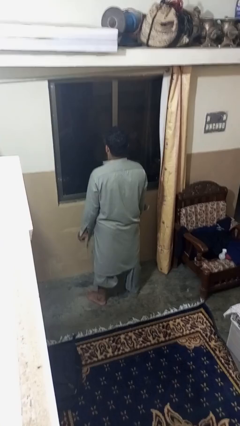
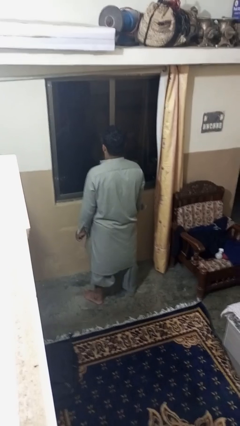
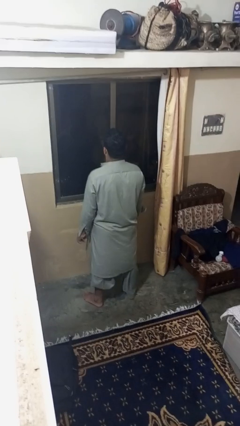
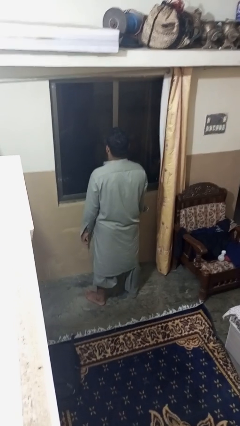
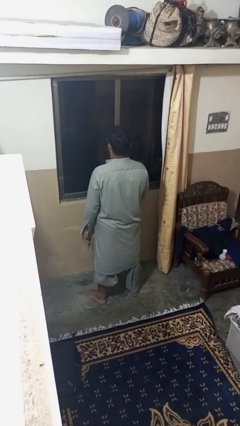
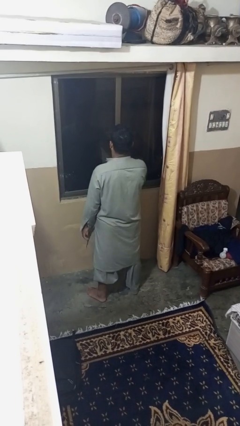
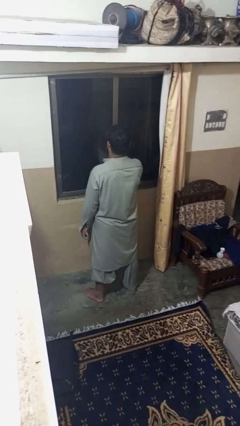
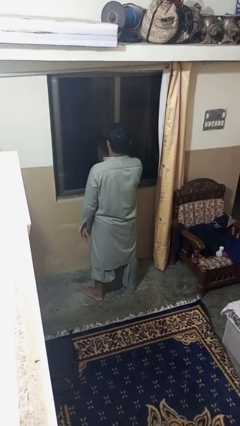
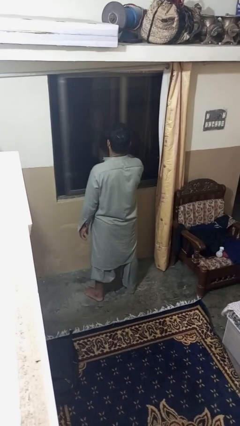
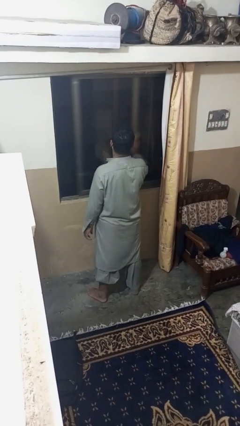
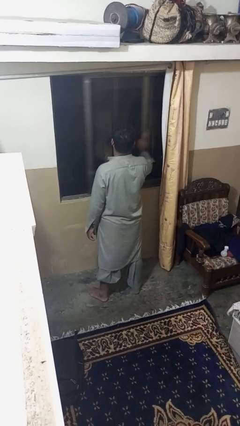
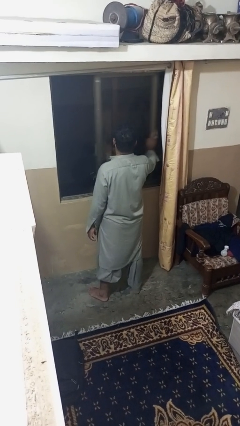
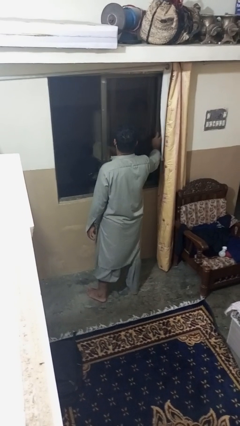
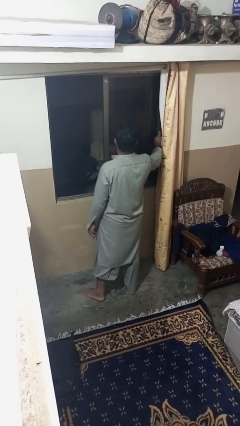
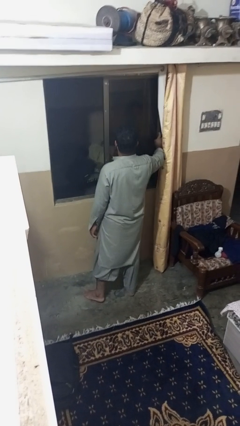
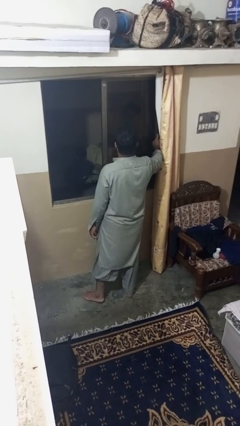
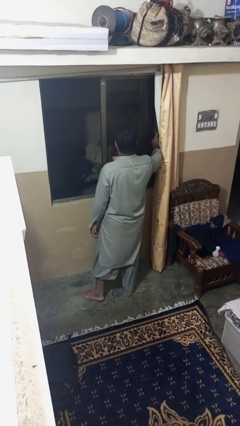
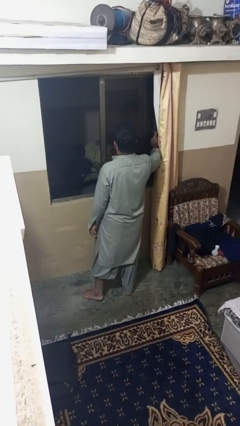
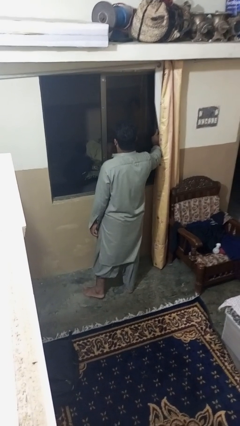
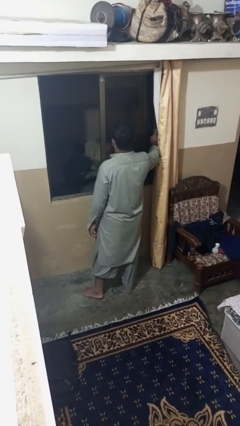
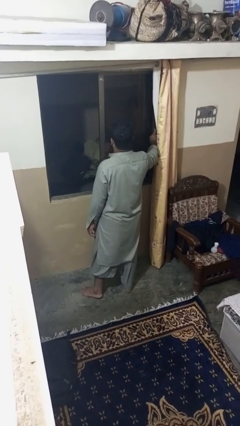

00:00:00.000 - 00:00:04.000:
person opens home window

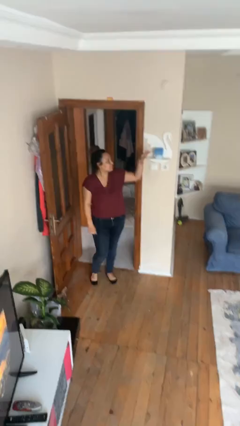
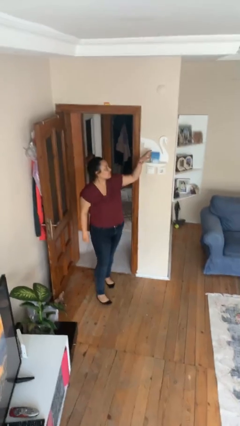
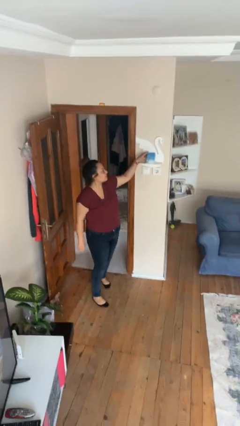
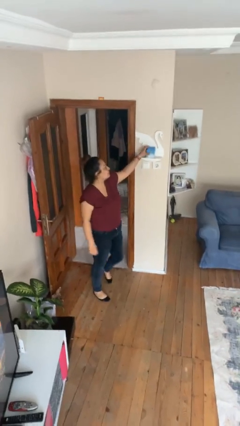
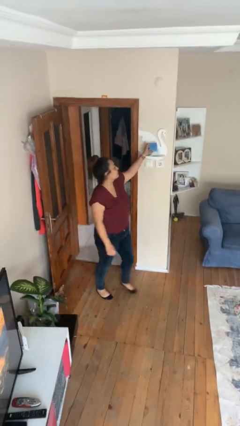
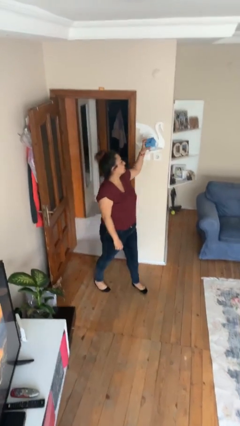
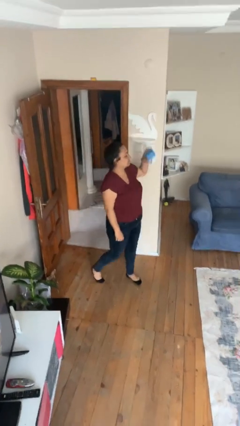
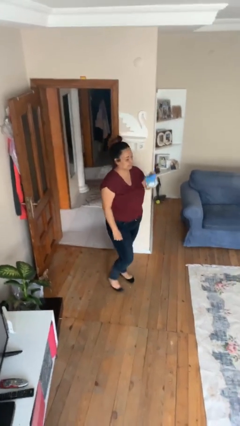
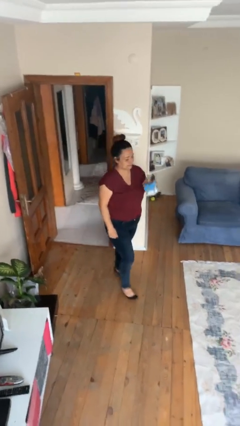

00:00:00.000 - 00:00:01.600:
person picks up object from shelf

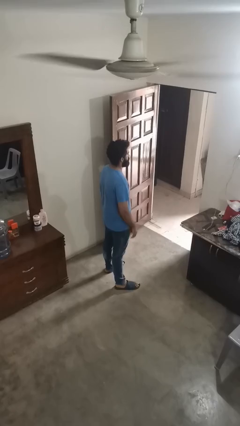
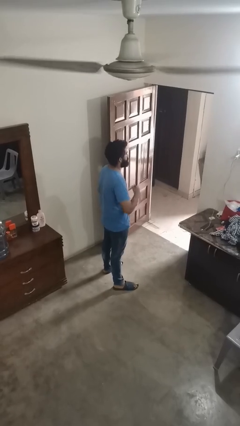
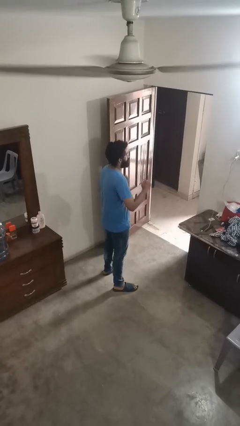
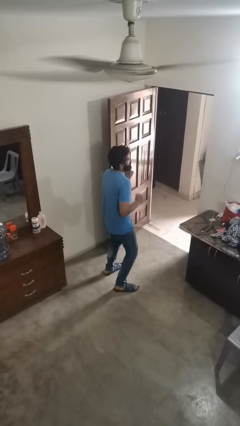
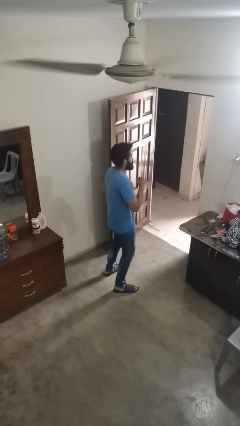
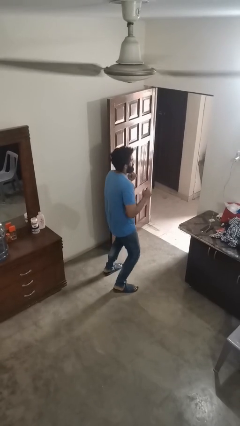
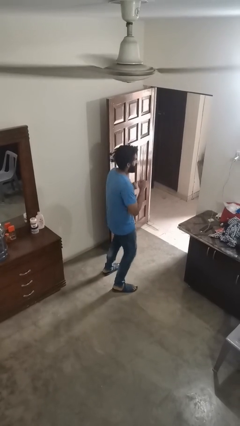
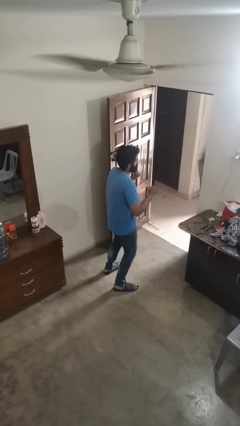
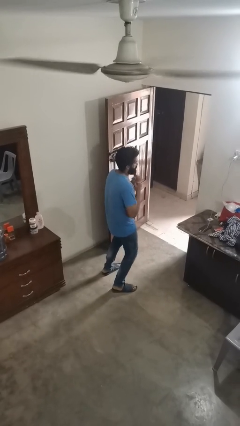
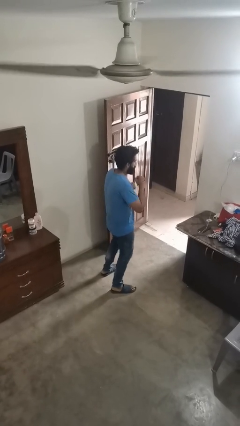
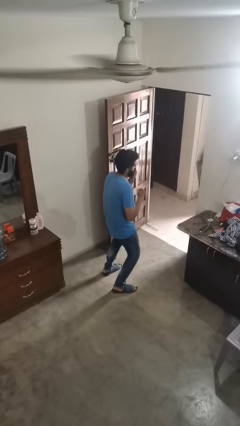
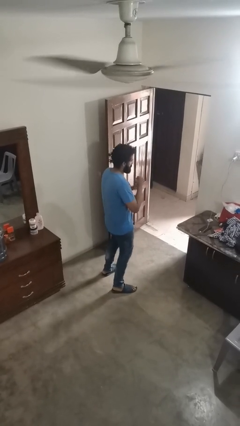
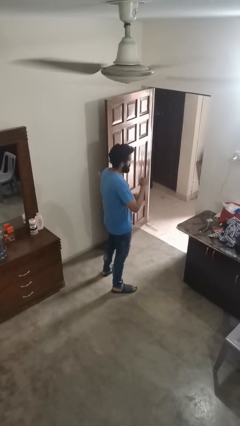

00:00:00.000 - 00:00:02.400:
person dances in place

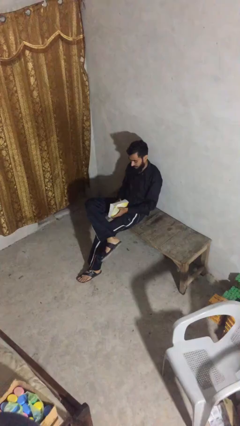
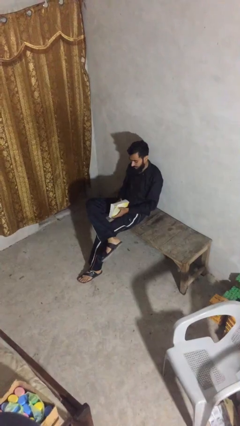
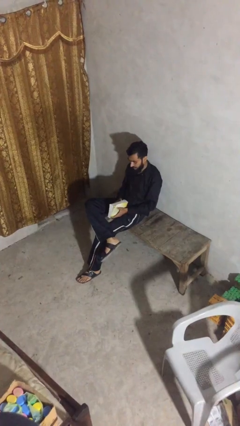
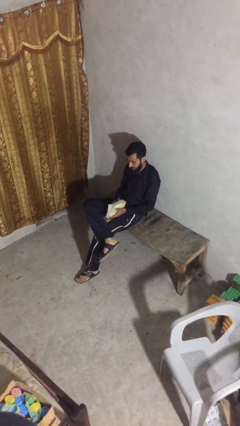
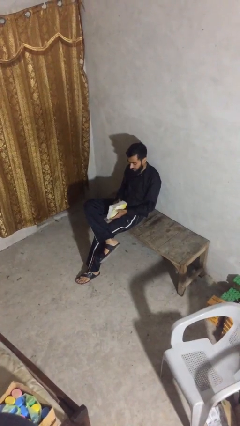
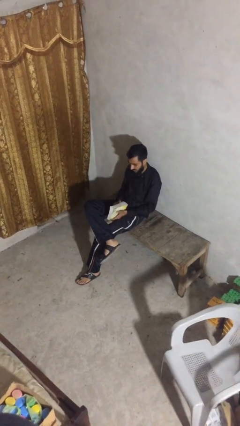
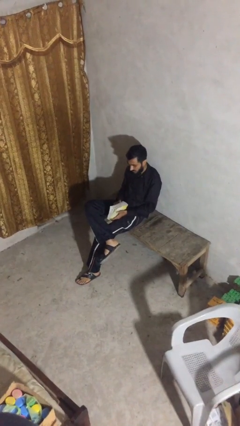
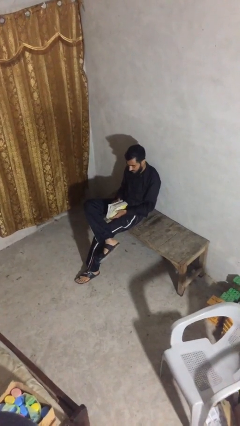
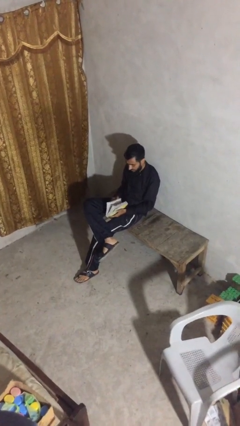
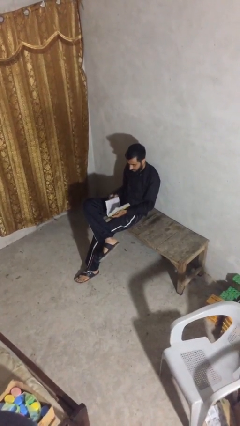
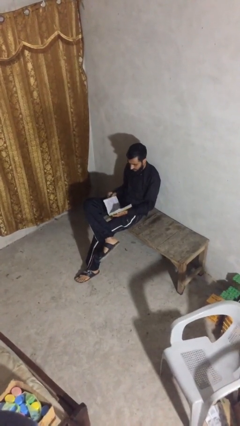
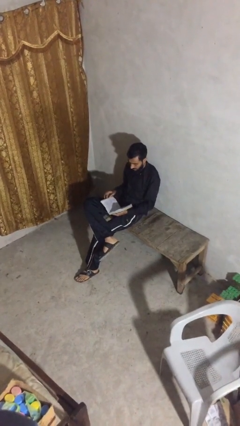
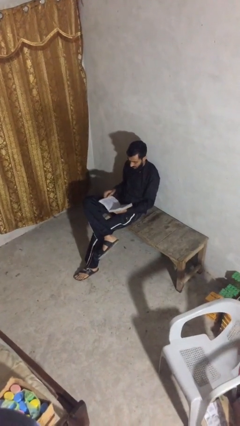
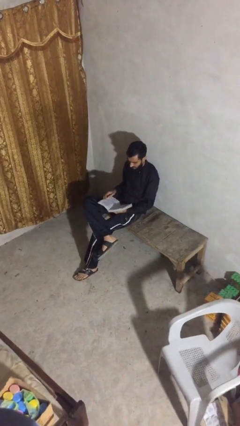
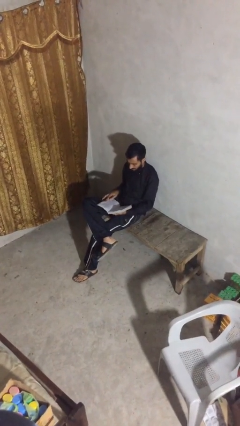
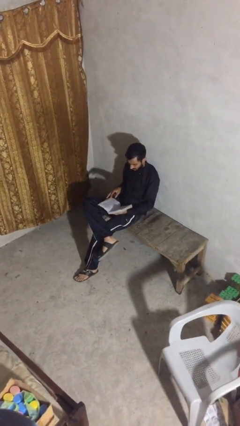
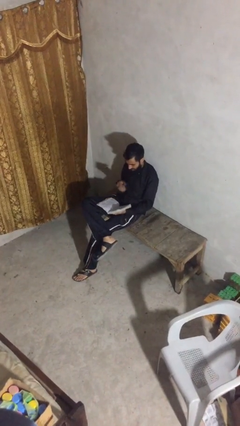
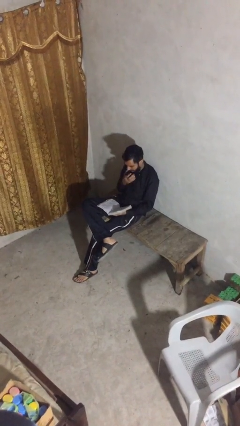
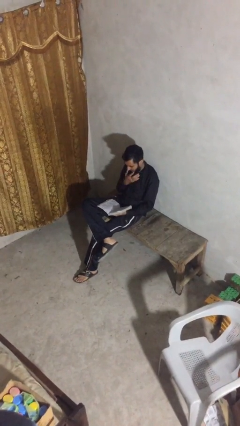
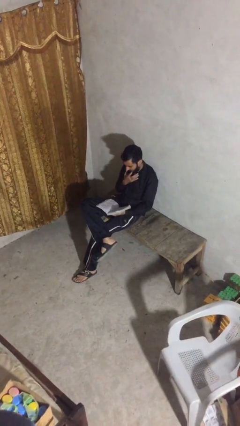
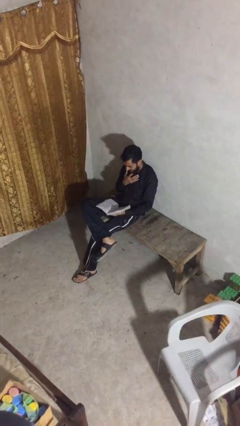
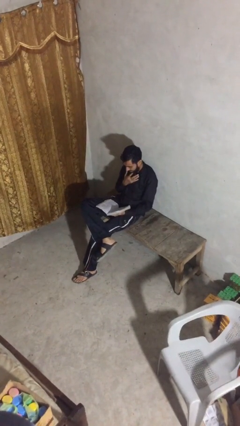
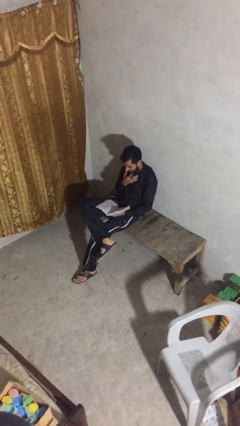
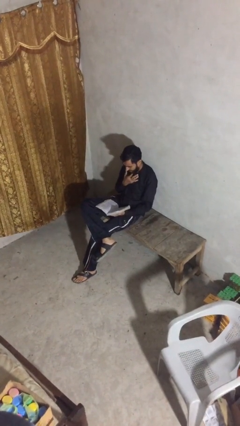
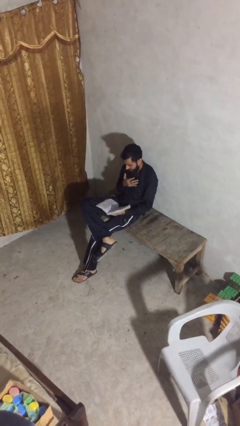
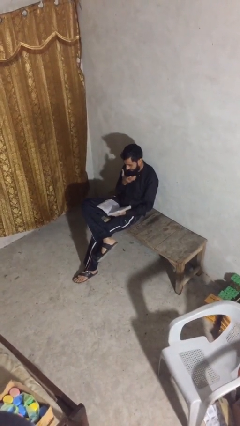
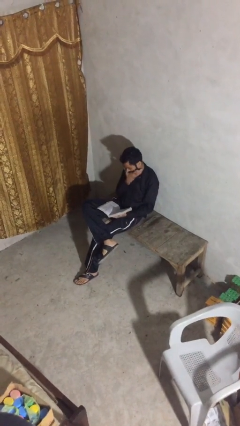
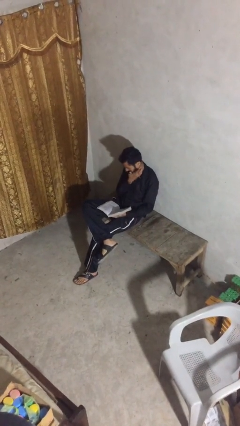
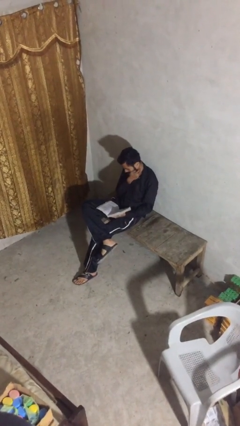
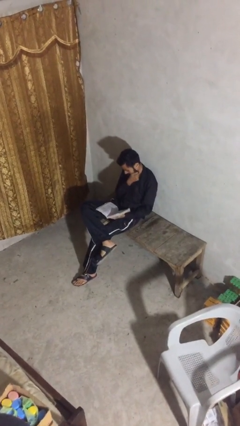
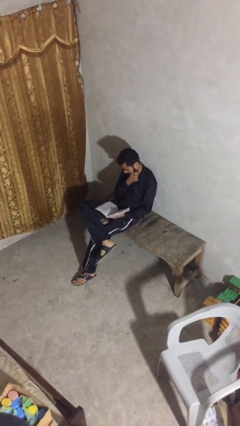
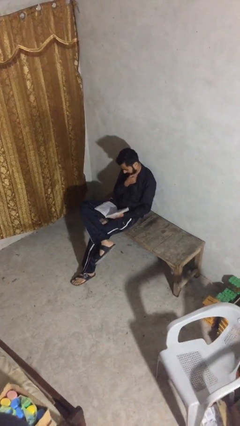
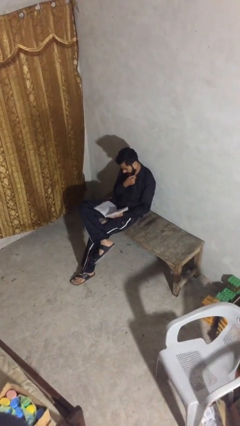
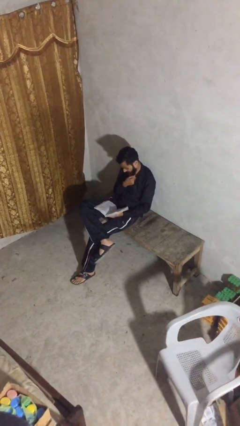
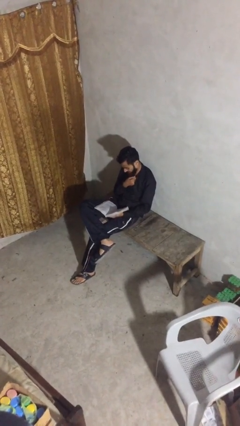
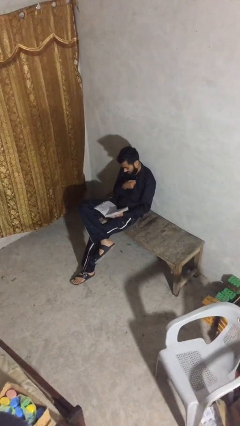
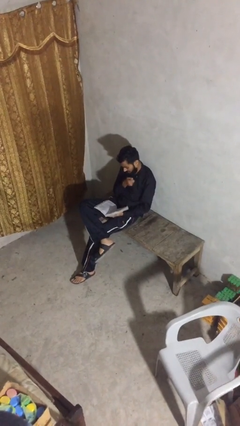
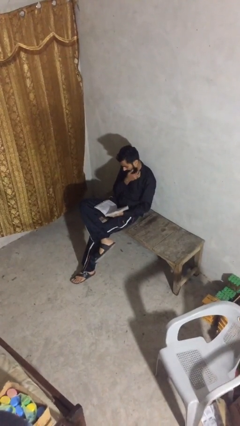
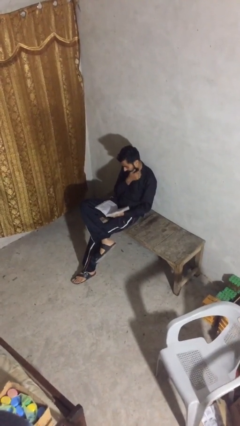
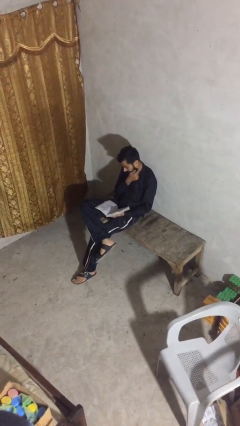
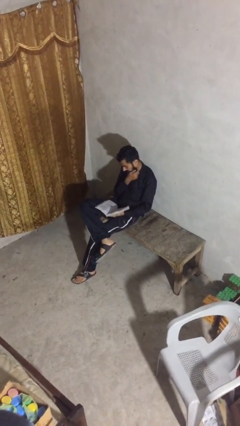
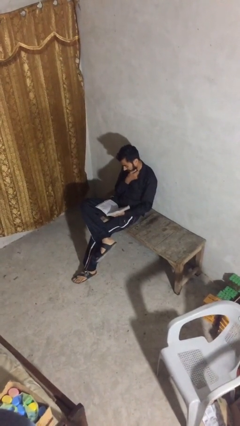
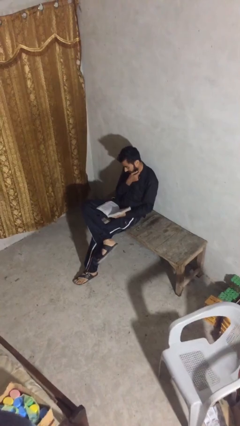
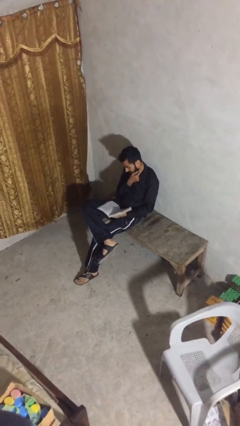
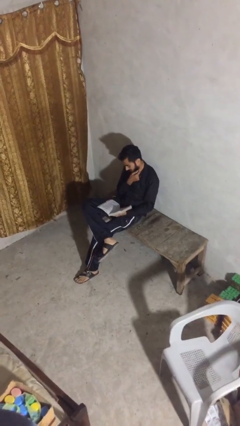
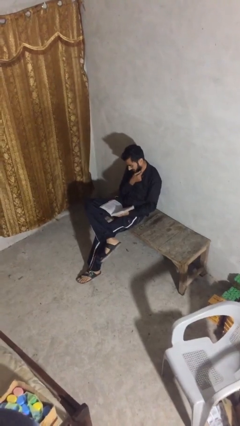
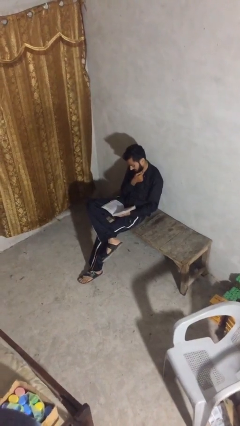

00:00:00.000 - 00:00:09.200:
person reads document

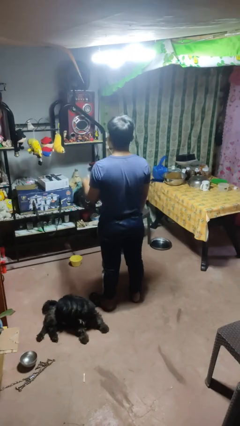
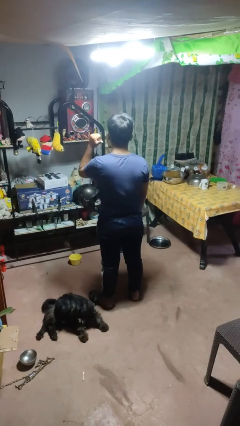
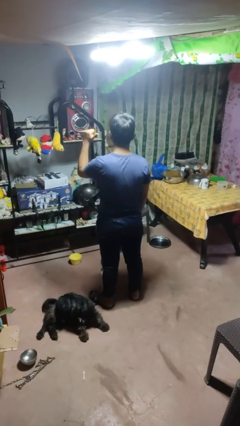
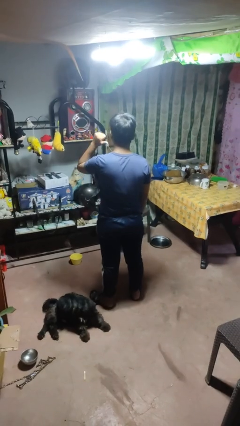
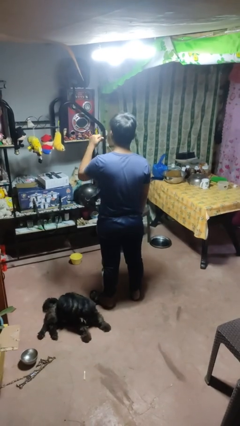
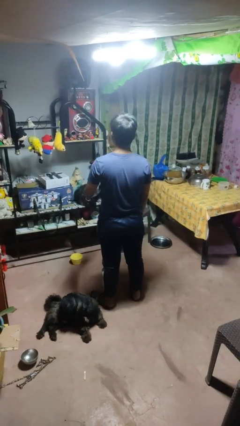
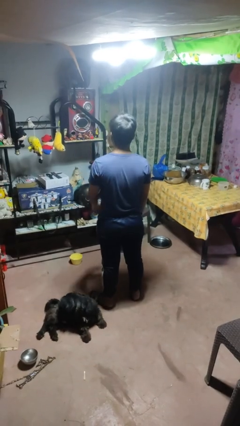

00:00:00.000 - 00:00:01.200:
person gestures behind me
